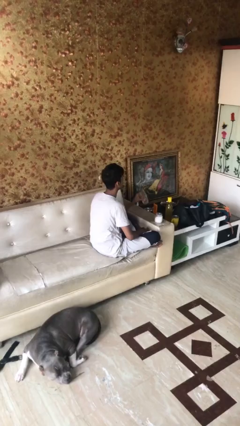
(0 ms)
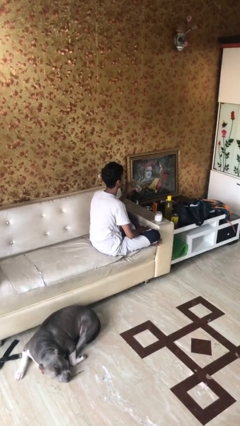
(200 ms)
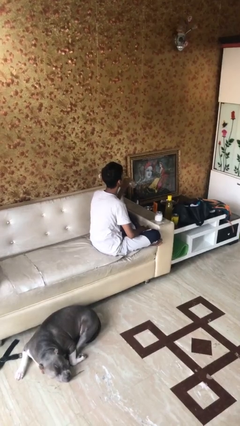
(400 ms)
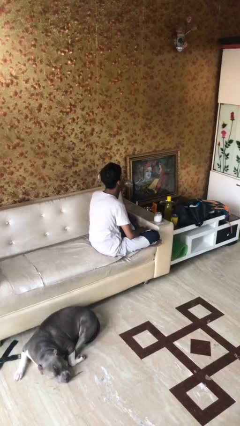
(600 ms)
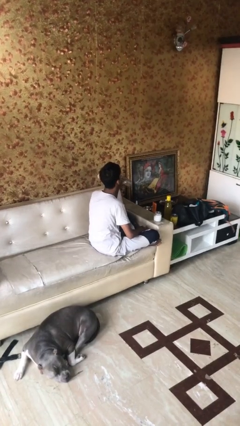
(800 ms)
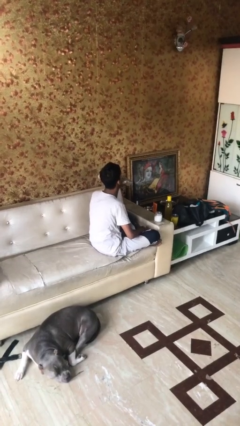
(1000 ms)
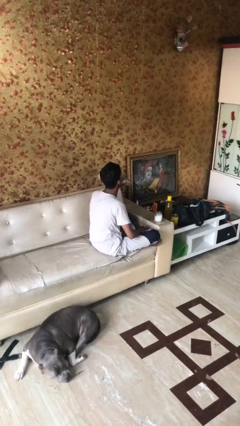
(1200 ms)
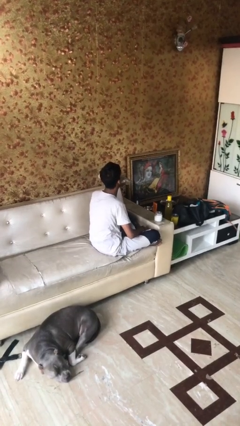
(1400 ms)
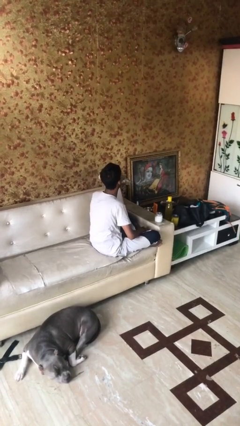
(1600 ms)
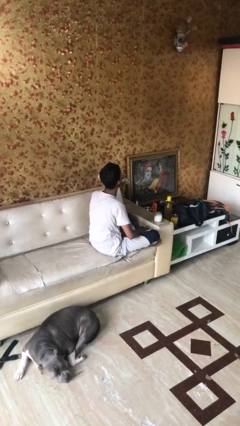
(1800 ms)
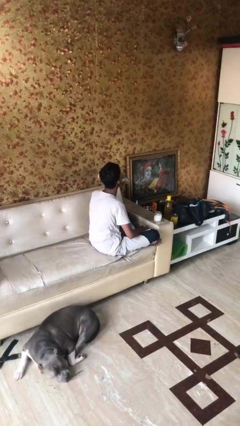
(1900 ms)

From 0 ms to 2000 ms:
person drinks from cup

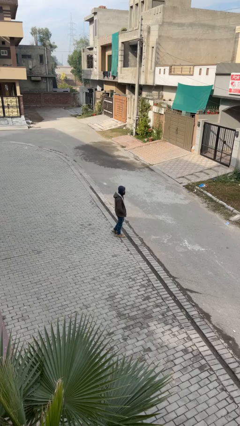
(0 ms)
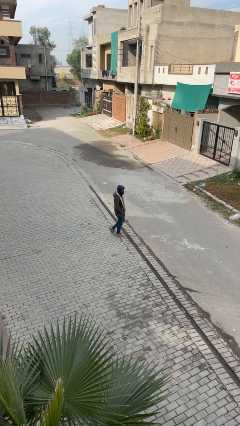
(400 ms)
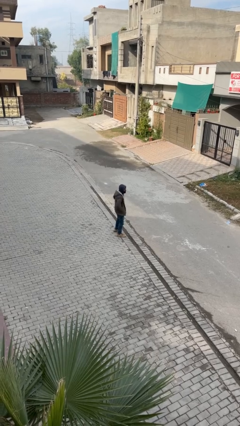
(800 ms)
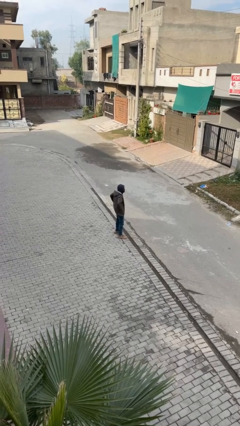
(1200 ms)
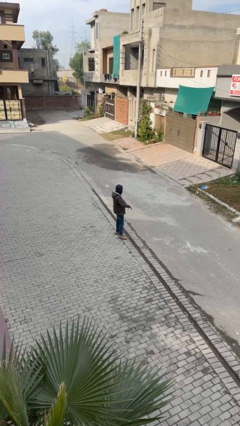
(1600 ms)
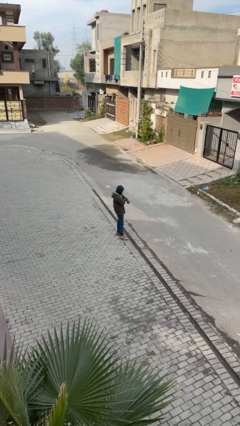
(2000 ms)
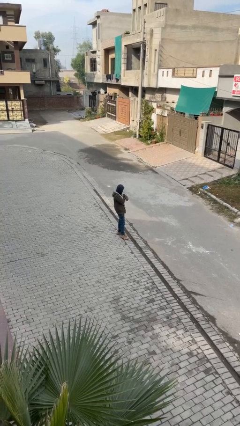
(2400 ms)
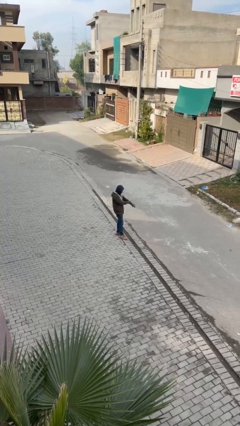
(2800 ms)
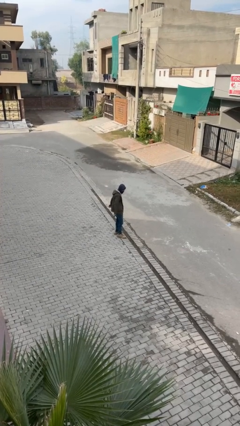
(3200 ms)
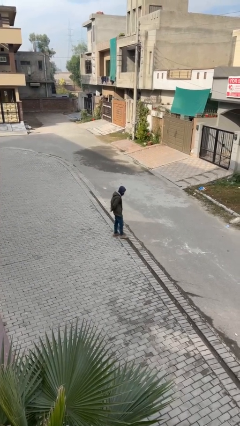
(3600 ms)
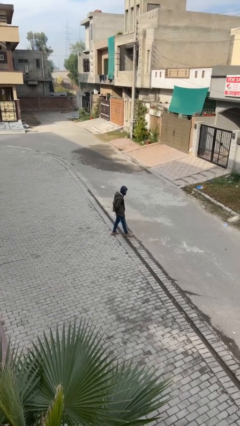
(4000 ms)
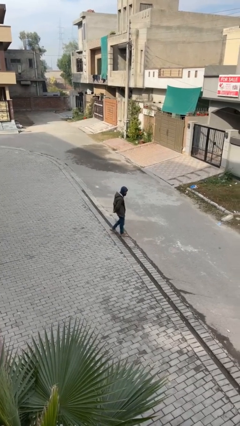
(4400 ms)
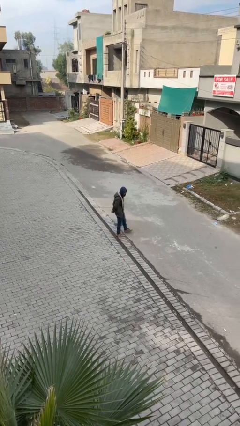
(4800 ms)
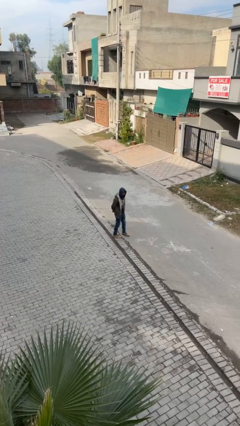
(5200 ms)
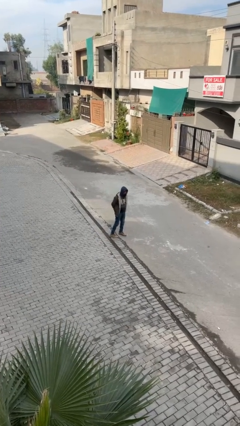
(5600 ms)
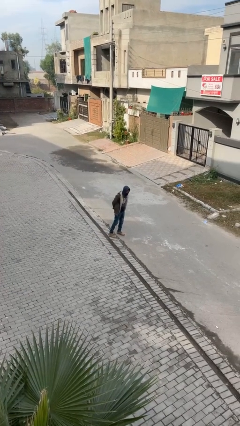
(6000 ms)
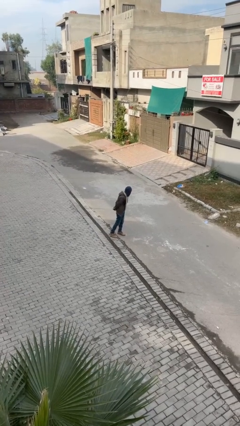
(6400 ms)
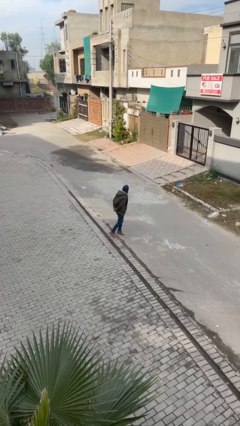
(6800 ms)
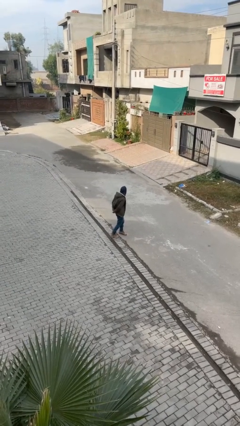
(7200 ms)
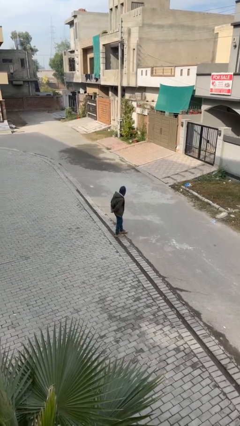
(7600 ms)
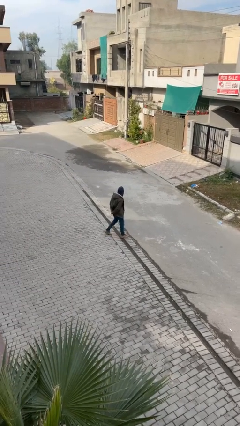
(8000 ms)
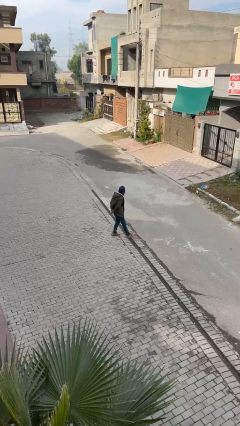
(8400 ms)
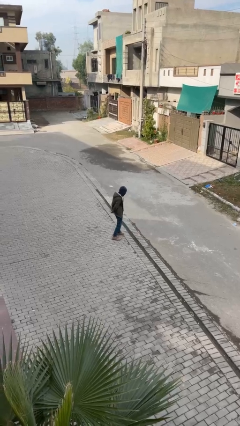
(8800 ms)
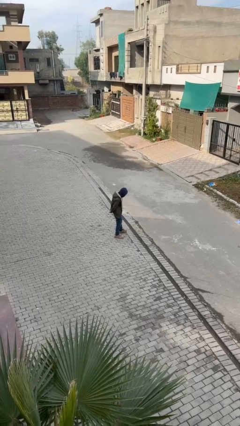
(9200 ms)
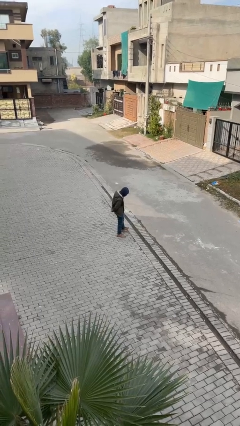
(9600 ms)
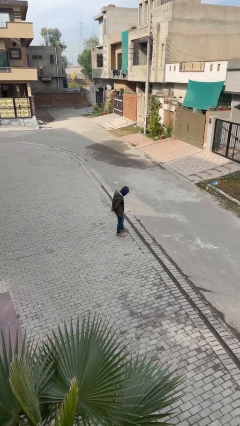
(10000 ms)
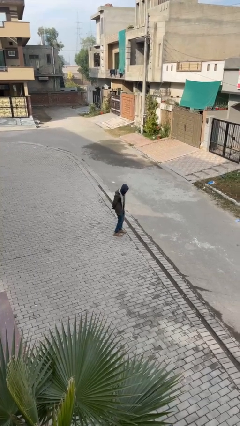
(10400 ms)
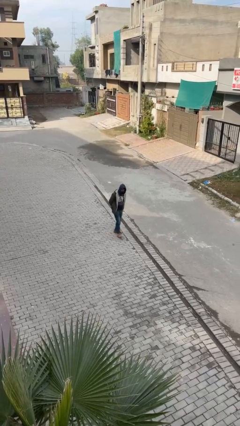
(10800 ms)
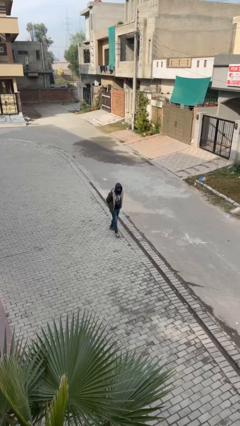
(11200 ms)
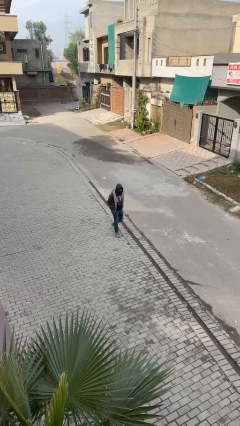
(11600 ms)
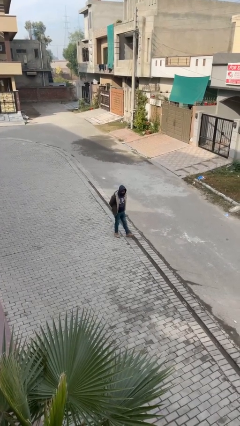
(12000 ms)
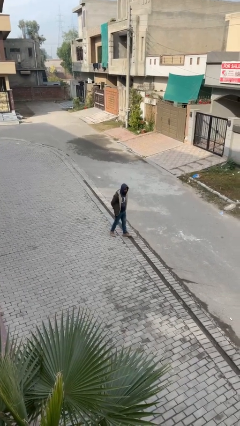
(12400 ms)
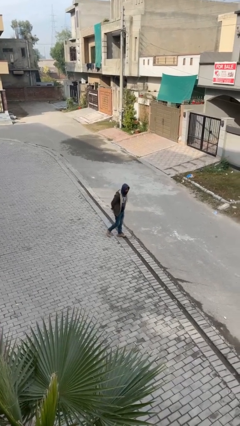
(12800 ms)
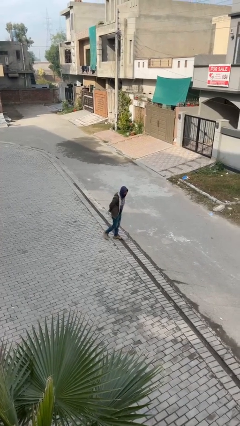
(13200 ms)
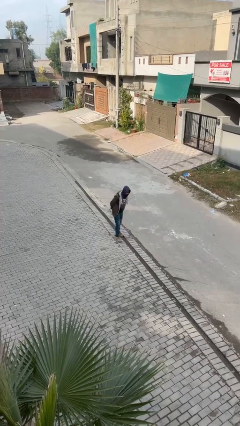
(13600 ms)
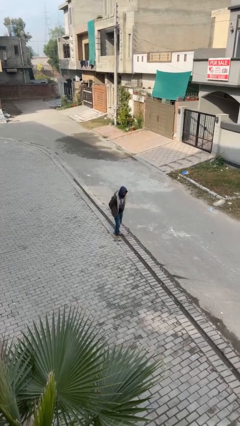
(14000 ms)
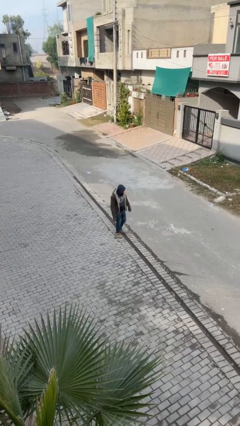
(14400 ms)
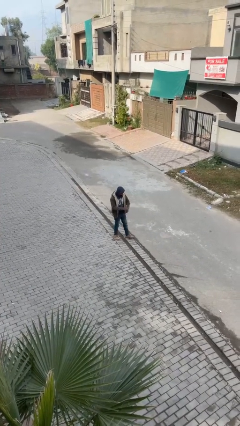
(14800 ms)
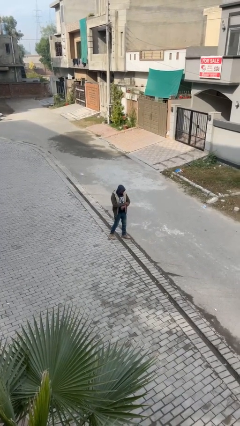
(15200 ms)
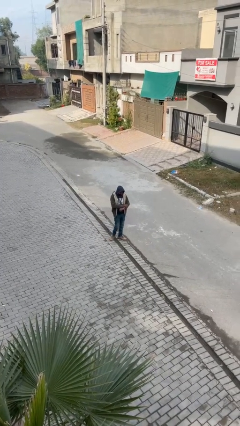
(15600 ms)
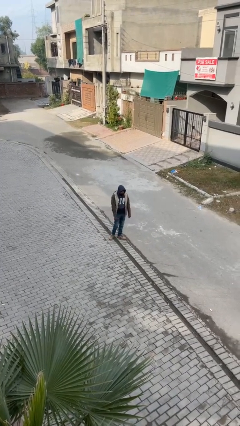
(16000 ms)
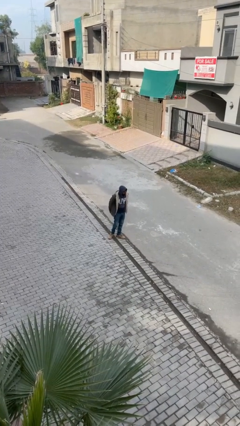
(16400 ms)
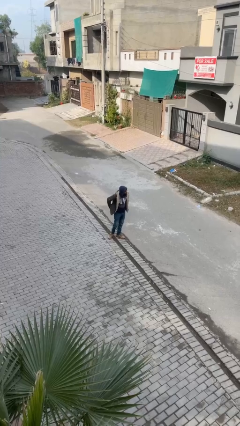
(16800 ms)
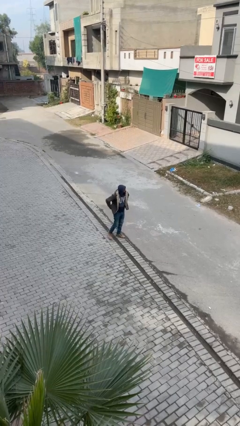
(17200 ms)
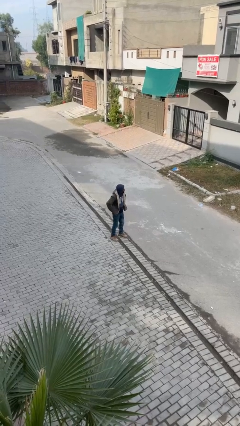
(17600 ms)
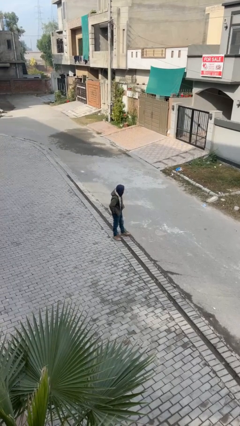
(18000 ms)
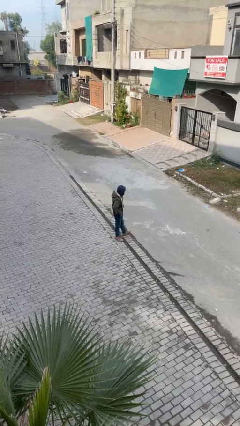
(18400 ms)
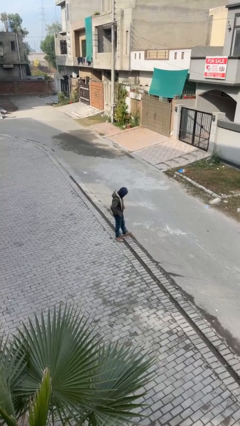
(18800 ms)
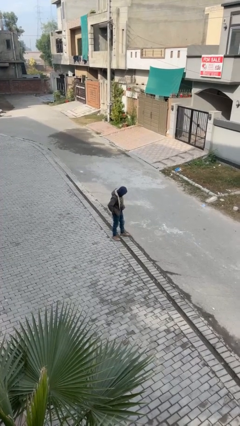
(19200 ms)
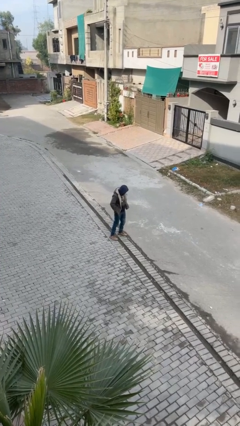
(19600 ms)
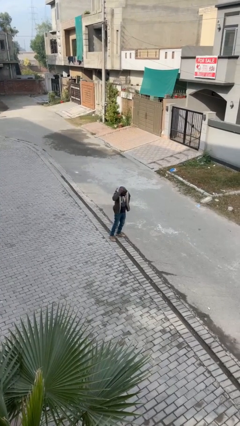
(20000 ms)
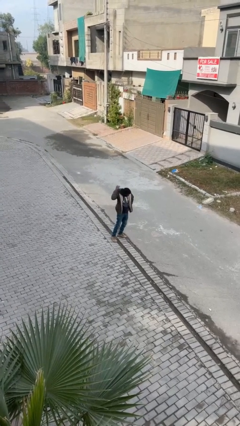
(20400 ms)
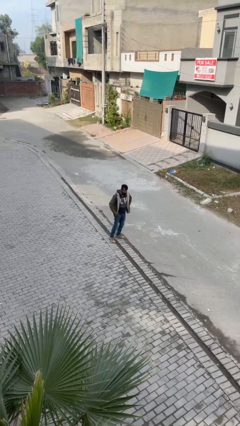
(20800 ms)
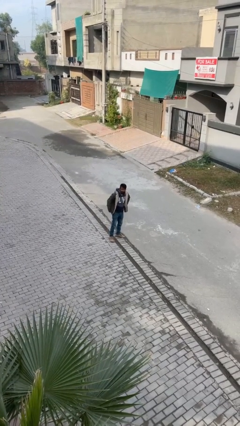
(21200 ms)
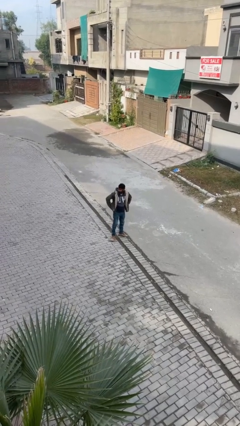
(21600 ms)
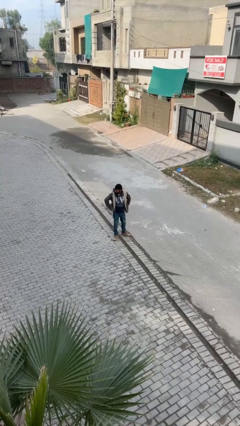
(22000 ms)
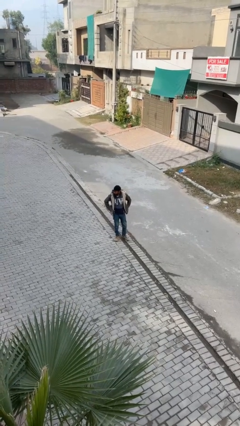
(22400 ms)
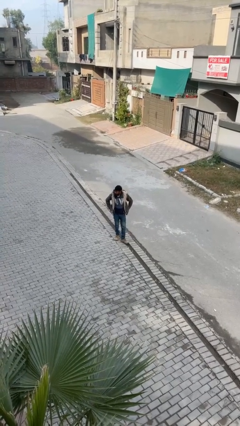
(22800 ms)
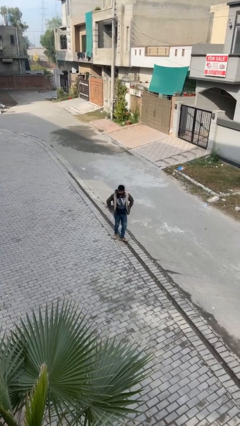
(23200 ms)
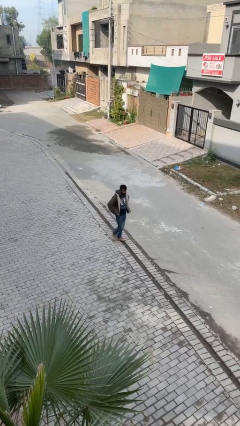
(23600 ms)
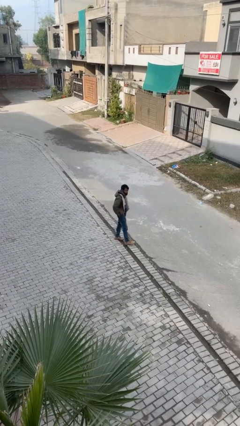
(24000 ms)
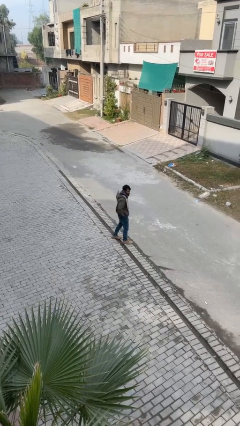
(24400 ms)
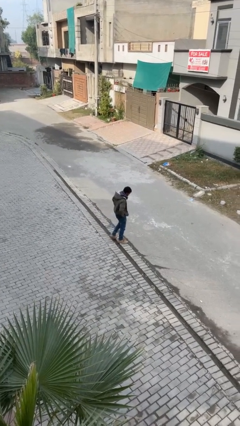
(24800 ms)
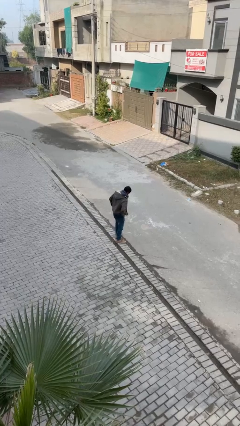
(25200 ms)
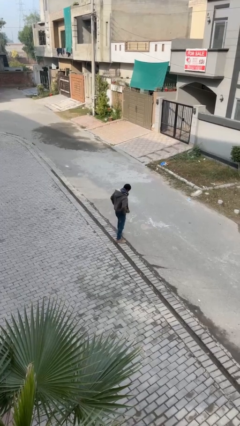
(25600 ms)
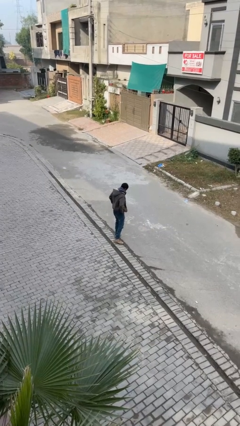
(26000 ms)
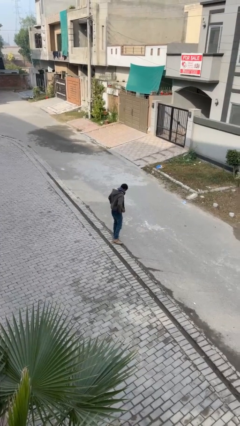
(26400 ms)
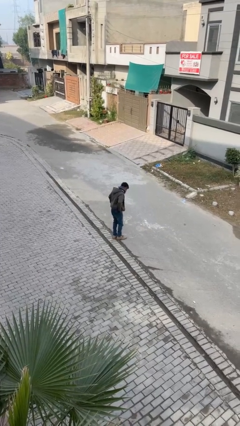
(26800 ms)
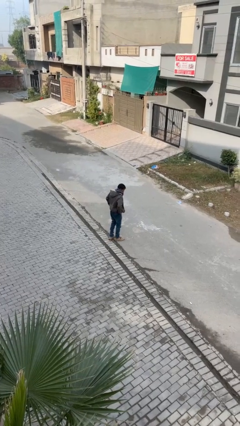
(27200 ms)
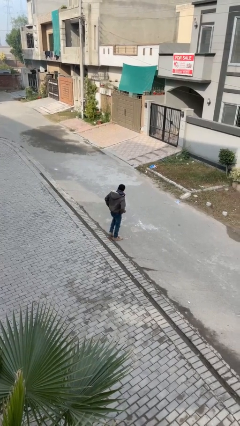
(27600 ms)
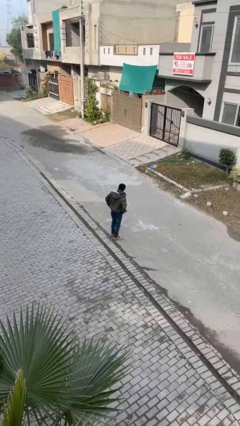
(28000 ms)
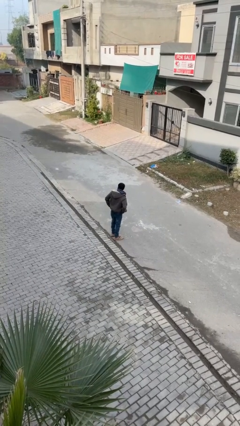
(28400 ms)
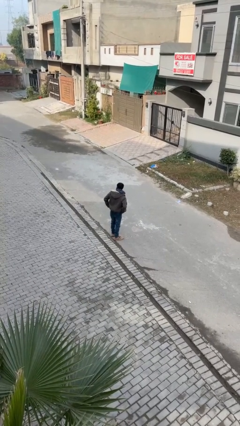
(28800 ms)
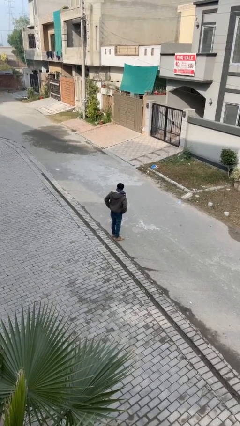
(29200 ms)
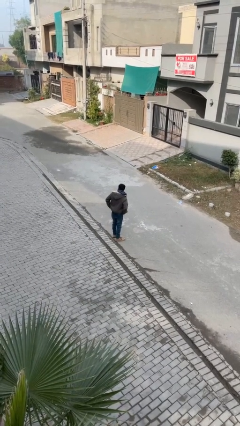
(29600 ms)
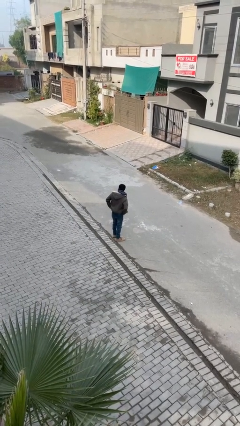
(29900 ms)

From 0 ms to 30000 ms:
person walks

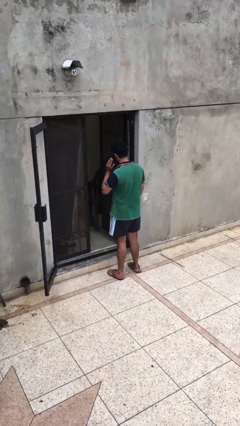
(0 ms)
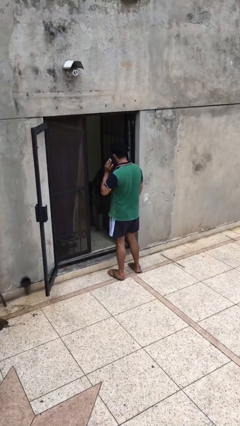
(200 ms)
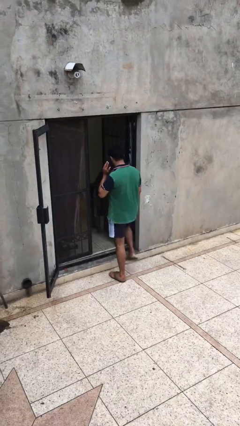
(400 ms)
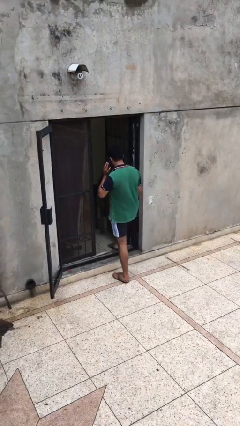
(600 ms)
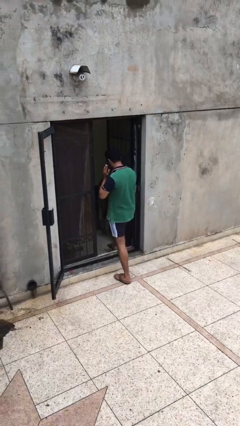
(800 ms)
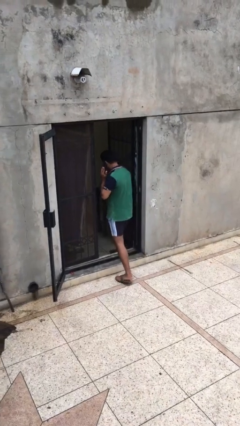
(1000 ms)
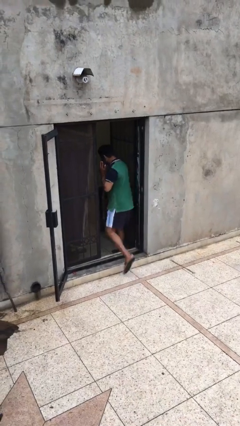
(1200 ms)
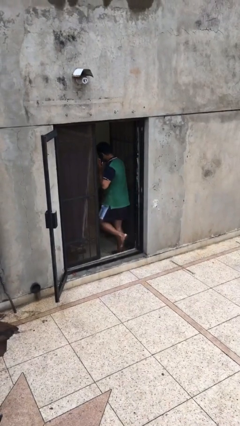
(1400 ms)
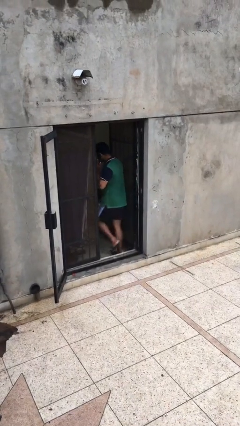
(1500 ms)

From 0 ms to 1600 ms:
person exits scene through structure
